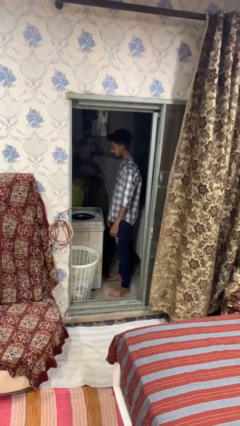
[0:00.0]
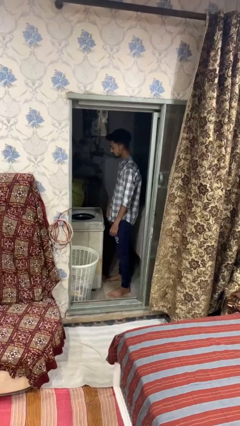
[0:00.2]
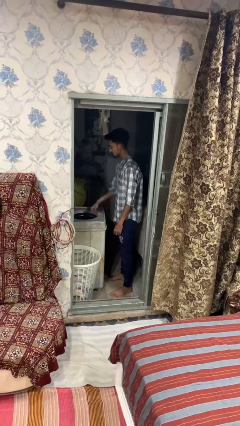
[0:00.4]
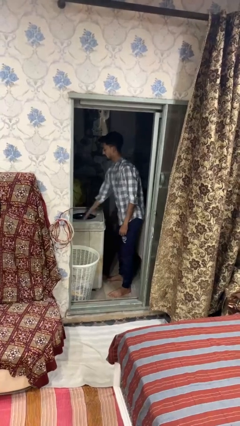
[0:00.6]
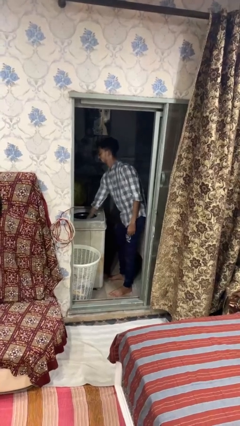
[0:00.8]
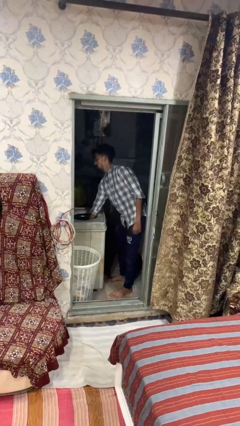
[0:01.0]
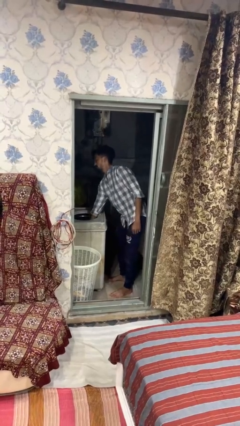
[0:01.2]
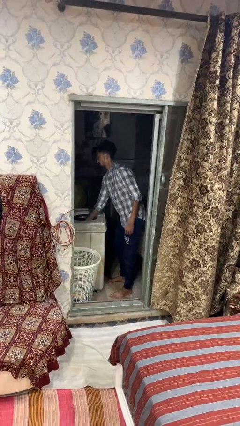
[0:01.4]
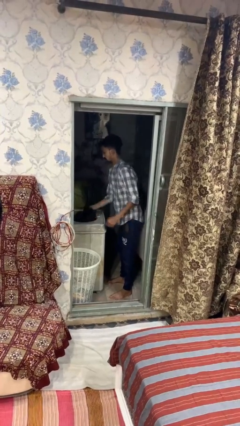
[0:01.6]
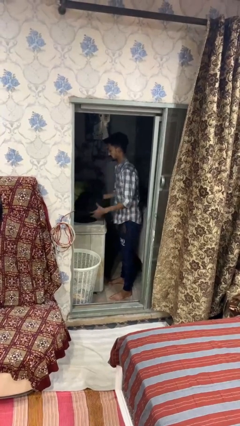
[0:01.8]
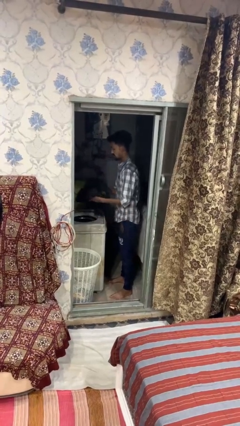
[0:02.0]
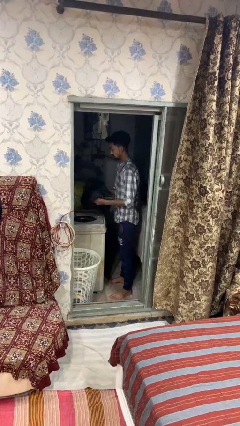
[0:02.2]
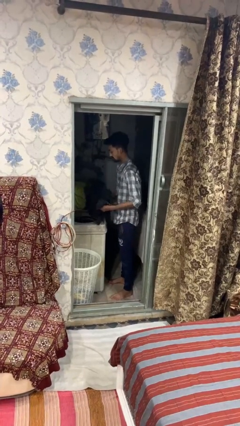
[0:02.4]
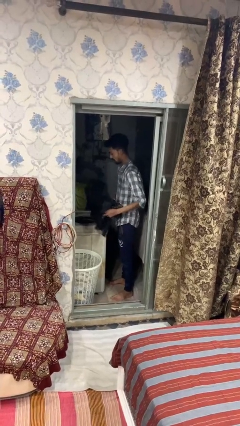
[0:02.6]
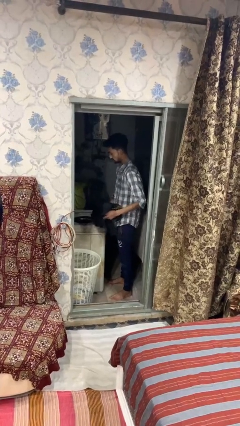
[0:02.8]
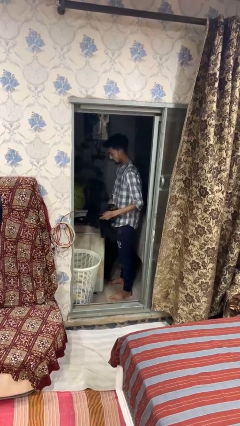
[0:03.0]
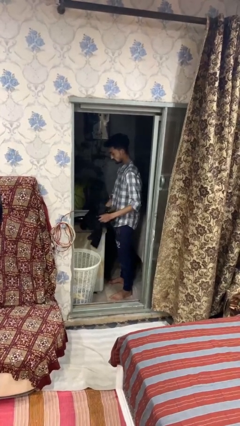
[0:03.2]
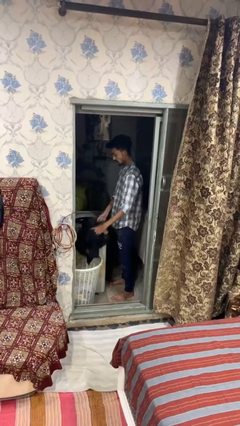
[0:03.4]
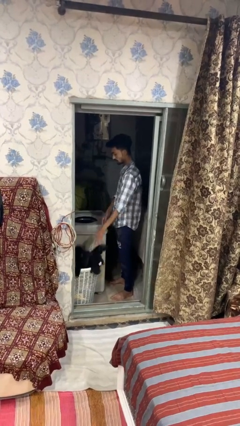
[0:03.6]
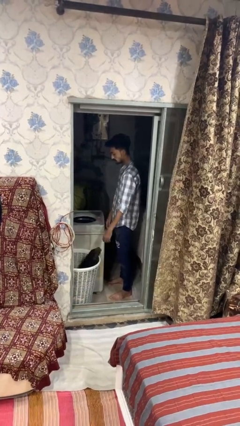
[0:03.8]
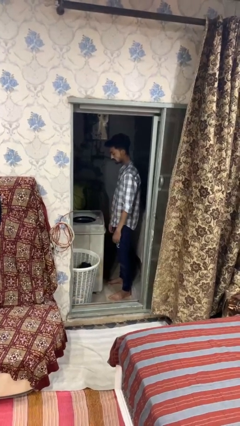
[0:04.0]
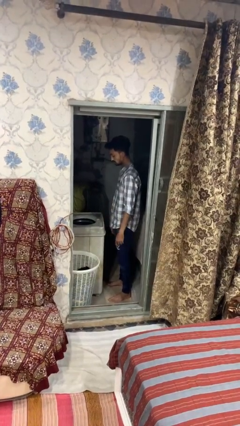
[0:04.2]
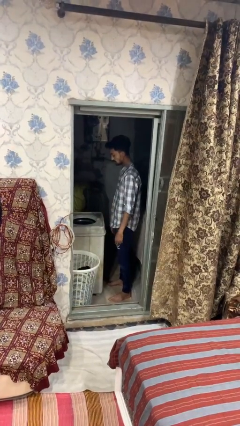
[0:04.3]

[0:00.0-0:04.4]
person unloads dryer

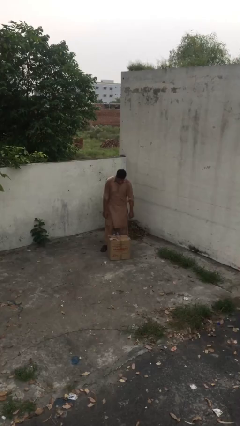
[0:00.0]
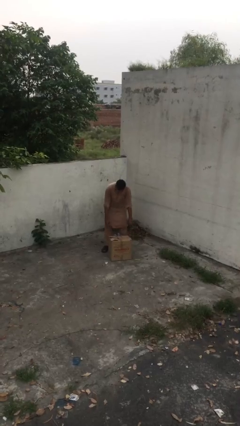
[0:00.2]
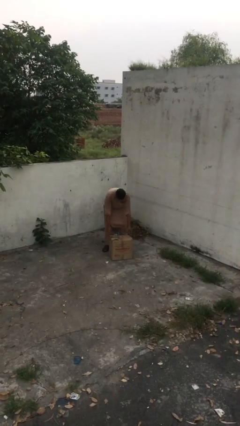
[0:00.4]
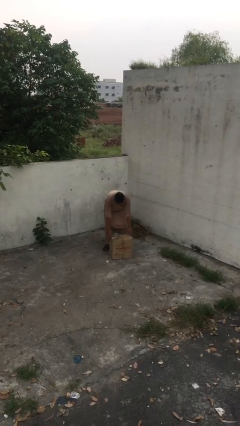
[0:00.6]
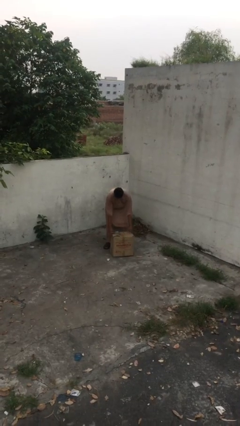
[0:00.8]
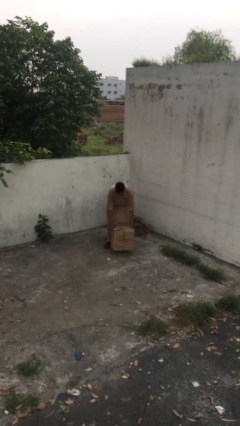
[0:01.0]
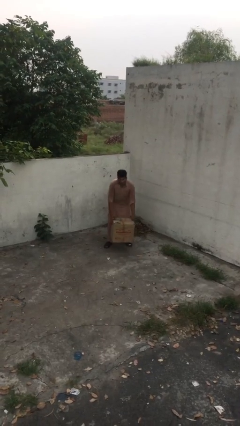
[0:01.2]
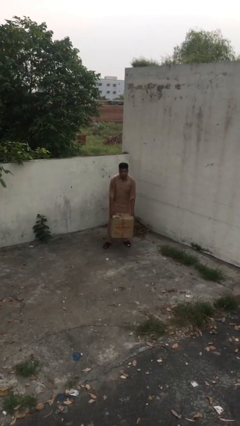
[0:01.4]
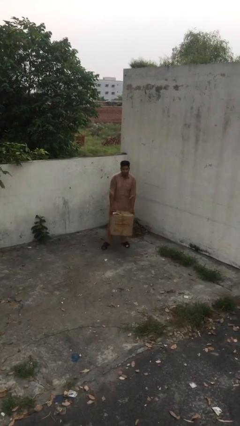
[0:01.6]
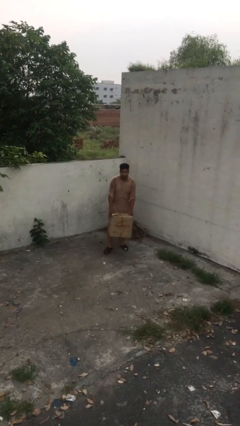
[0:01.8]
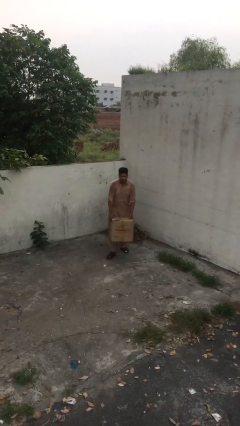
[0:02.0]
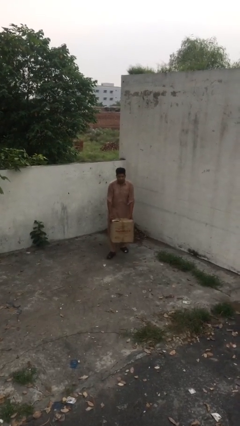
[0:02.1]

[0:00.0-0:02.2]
person picks up object from floor

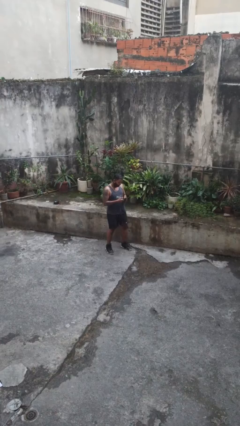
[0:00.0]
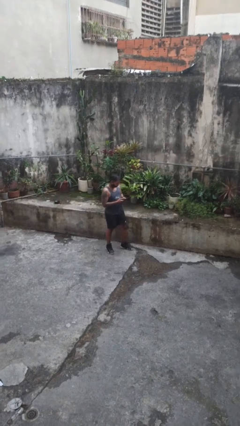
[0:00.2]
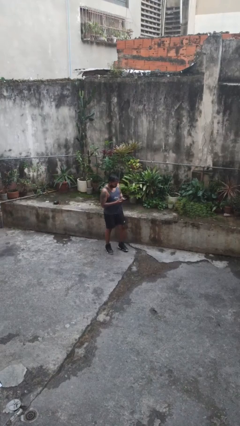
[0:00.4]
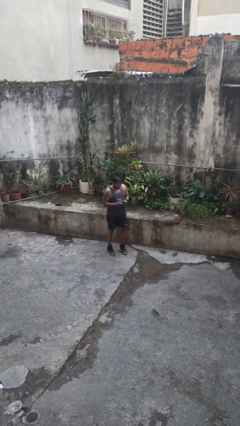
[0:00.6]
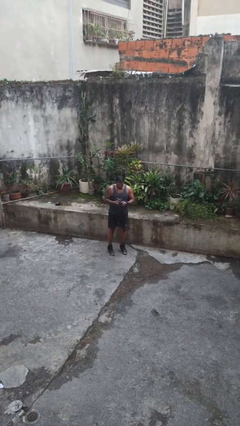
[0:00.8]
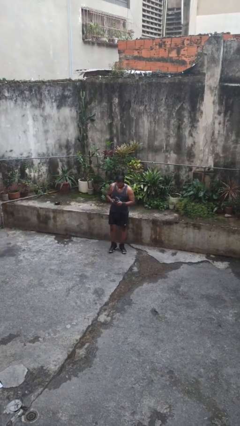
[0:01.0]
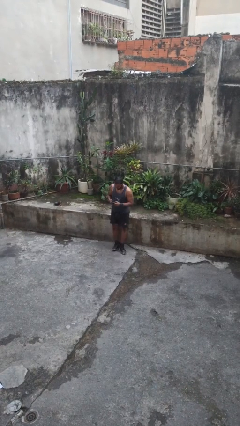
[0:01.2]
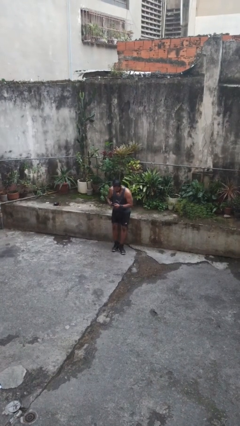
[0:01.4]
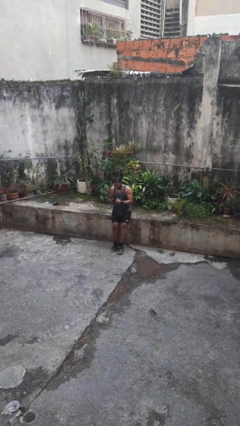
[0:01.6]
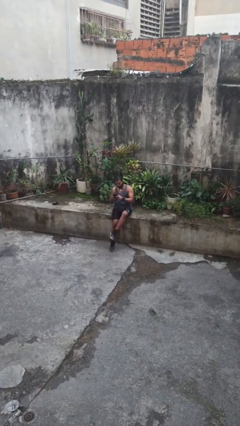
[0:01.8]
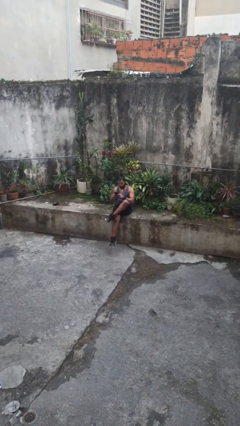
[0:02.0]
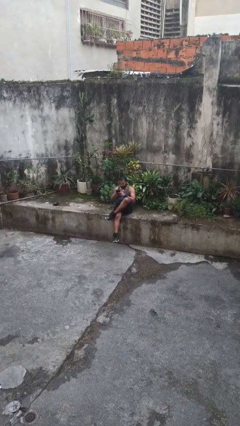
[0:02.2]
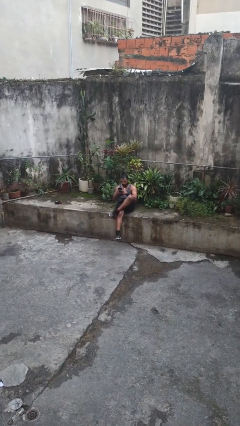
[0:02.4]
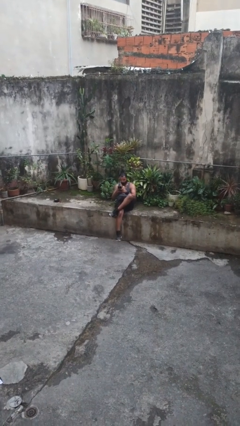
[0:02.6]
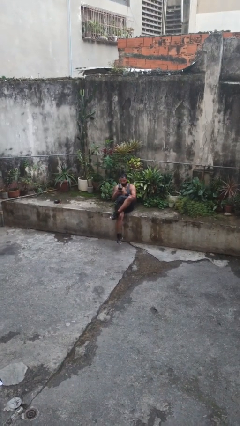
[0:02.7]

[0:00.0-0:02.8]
person sits down

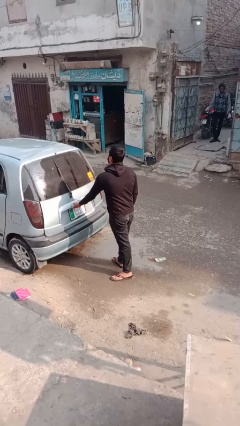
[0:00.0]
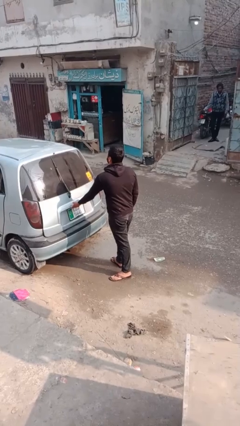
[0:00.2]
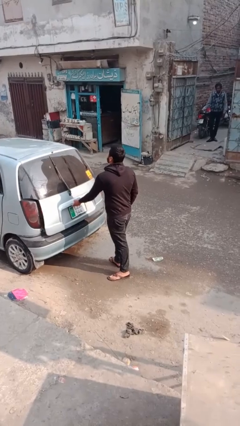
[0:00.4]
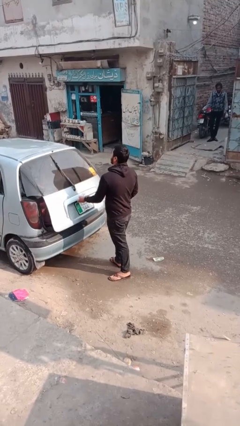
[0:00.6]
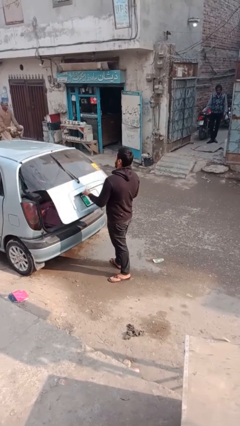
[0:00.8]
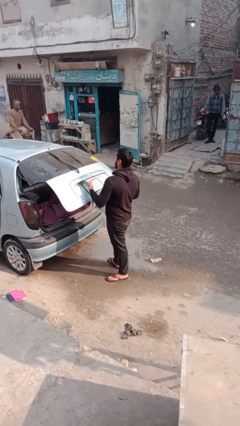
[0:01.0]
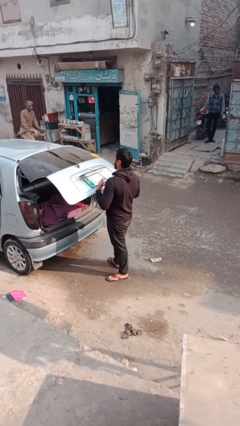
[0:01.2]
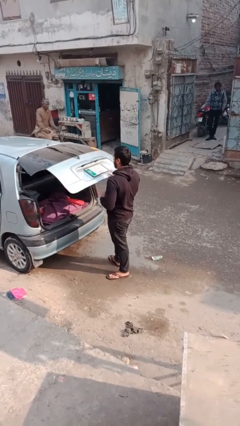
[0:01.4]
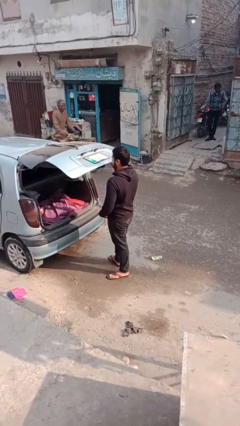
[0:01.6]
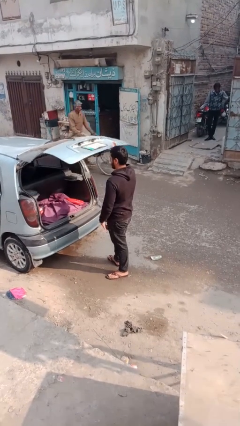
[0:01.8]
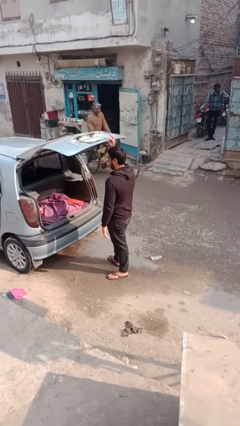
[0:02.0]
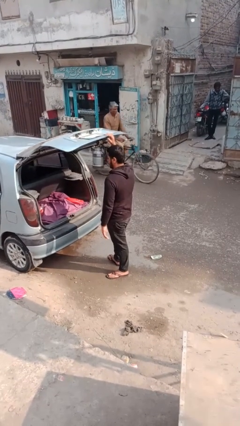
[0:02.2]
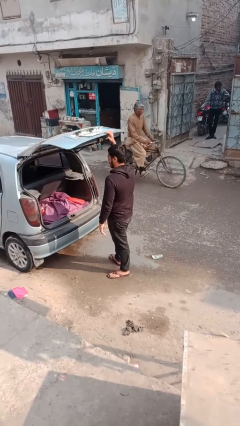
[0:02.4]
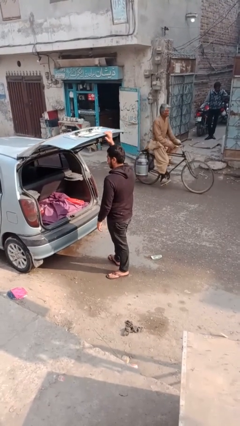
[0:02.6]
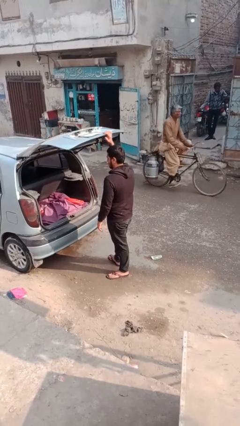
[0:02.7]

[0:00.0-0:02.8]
person opens car trunk

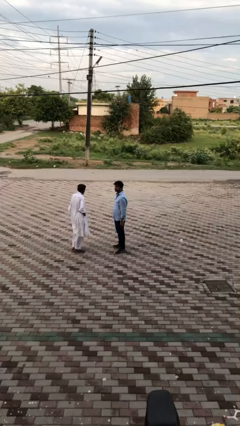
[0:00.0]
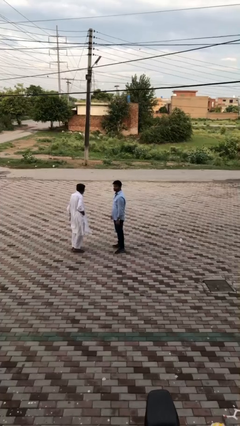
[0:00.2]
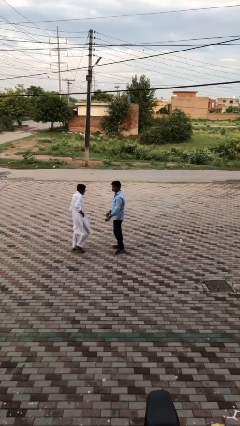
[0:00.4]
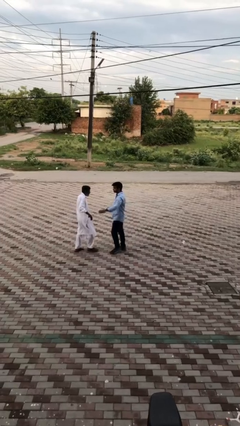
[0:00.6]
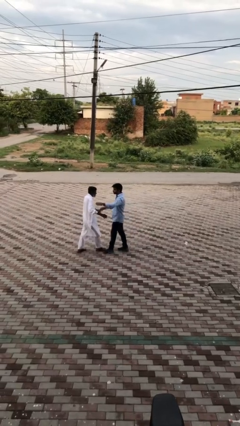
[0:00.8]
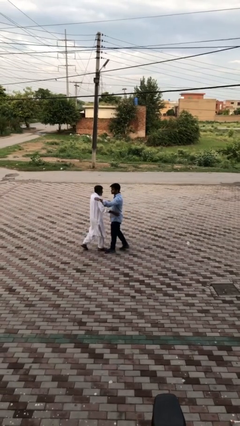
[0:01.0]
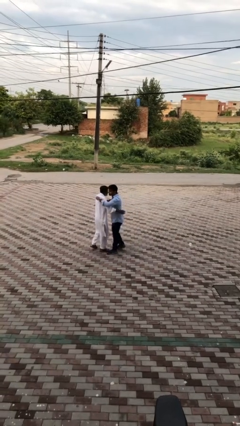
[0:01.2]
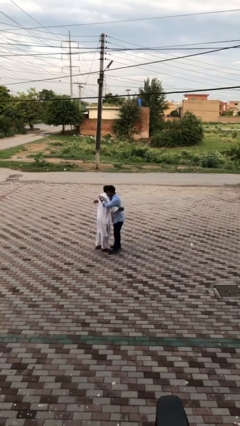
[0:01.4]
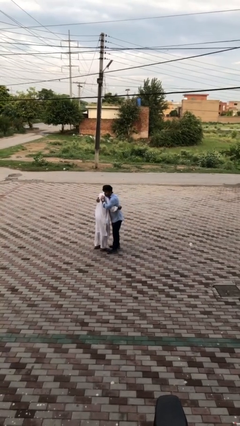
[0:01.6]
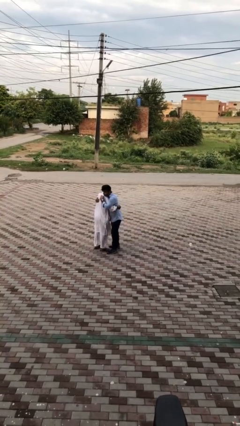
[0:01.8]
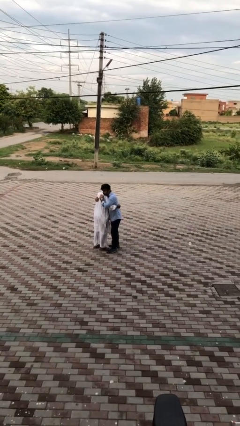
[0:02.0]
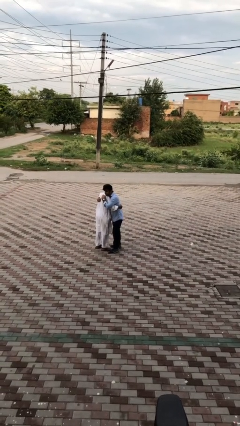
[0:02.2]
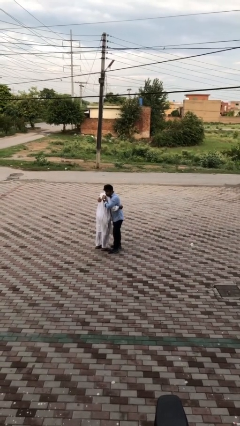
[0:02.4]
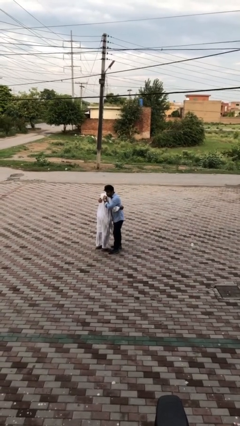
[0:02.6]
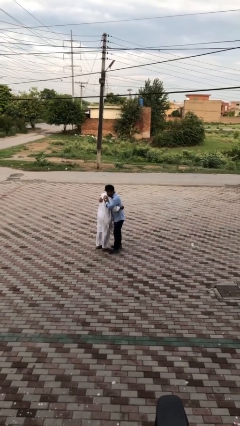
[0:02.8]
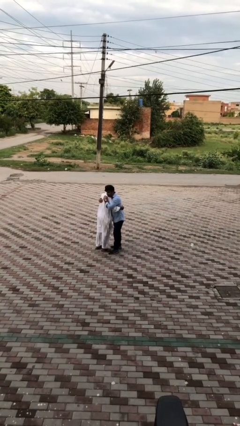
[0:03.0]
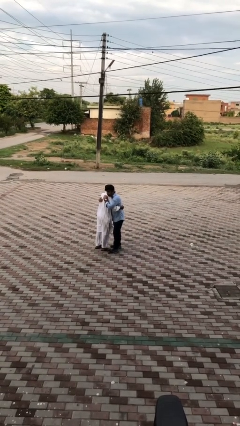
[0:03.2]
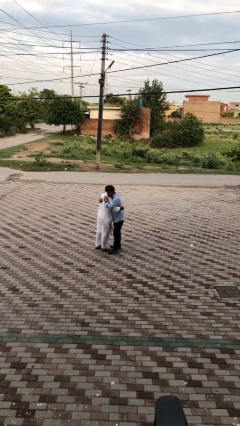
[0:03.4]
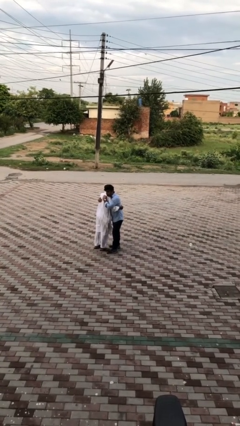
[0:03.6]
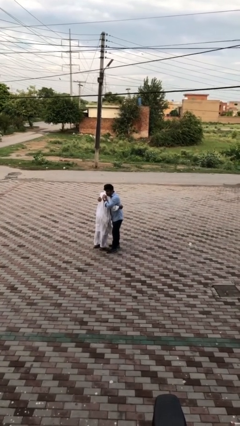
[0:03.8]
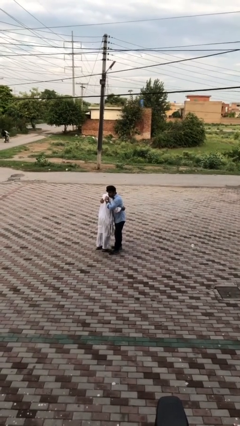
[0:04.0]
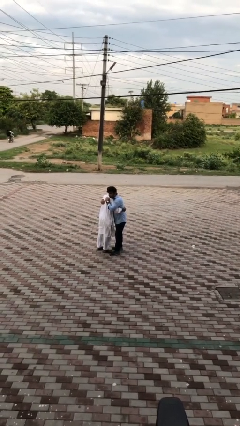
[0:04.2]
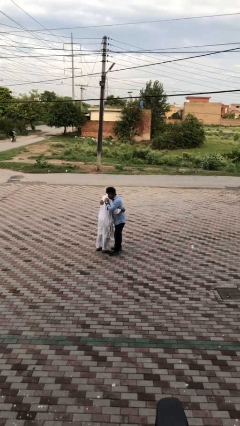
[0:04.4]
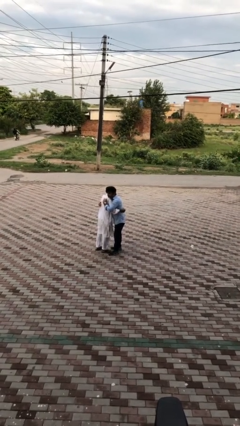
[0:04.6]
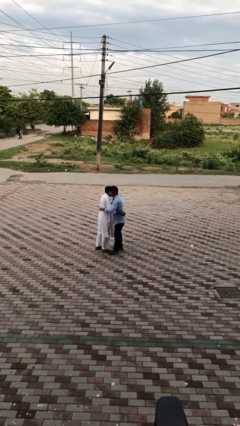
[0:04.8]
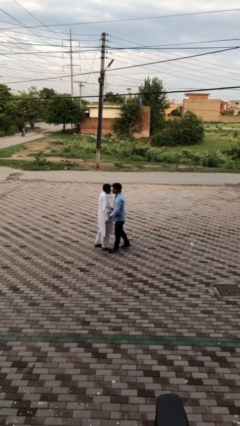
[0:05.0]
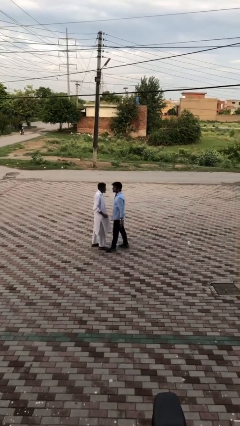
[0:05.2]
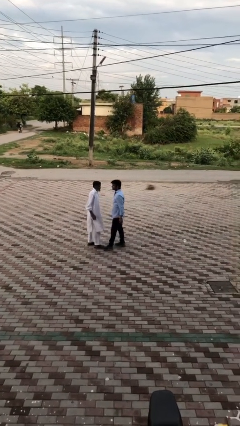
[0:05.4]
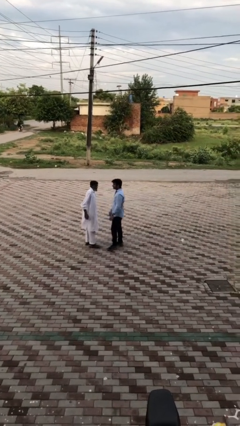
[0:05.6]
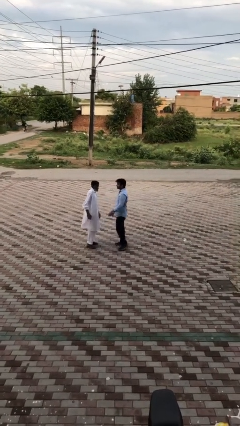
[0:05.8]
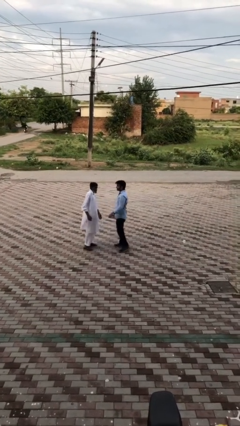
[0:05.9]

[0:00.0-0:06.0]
person embraces person
